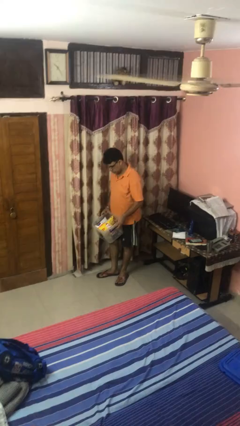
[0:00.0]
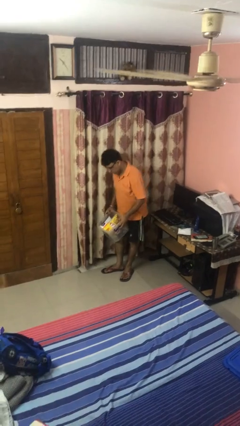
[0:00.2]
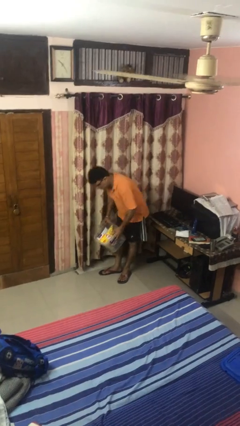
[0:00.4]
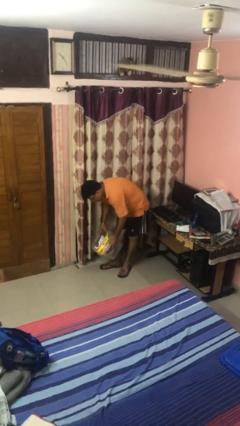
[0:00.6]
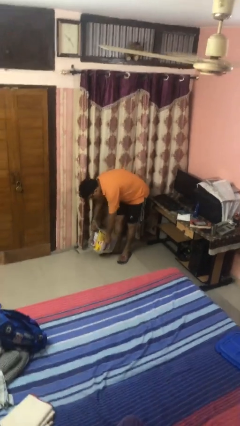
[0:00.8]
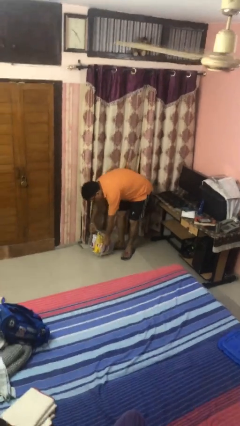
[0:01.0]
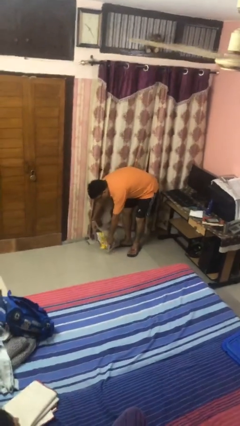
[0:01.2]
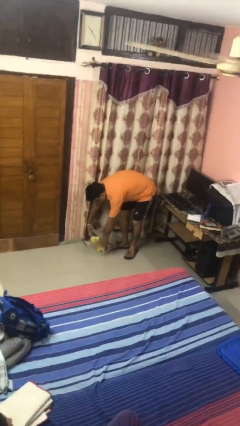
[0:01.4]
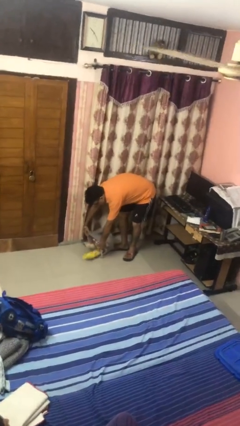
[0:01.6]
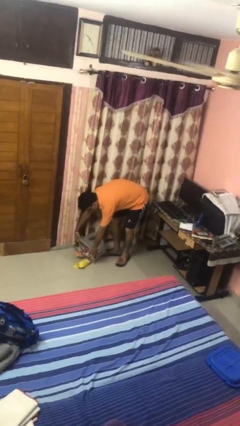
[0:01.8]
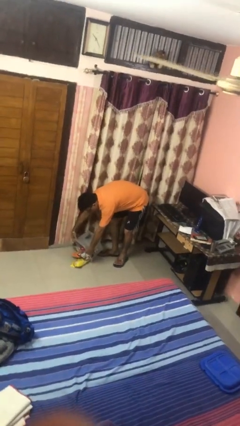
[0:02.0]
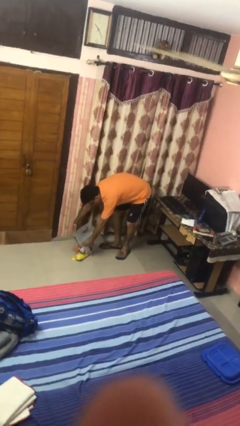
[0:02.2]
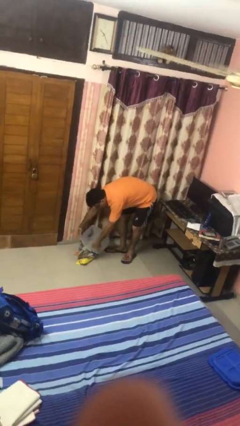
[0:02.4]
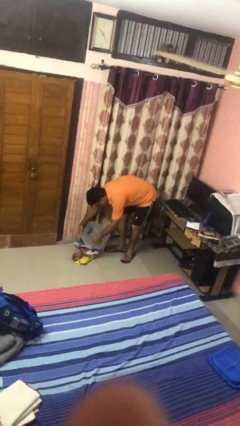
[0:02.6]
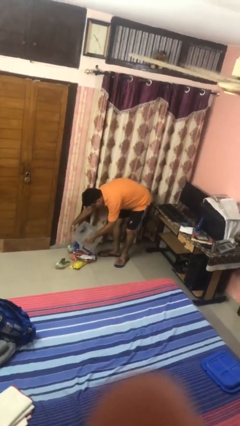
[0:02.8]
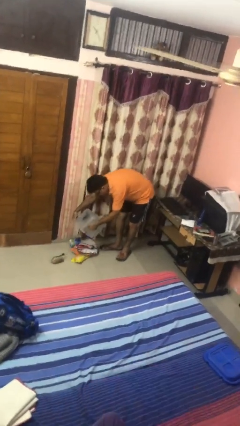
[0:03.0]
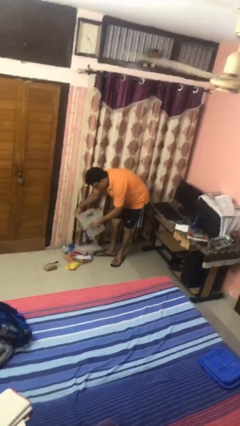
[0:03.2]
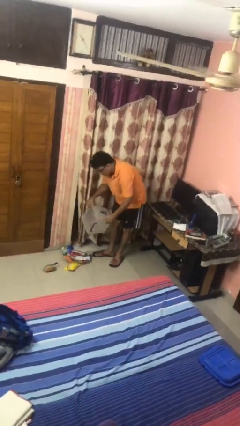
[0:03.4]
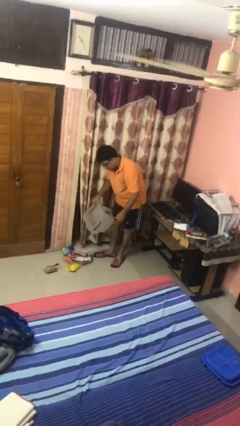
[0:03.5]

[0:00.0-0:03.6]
person unloads box onto floor

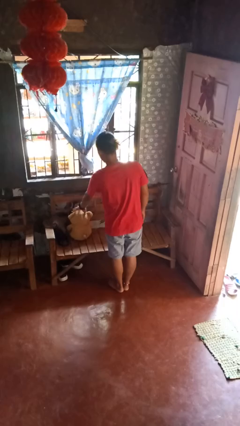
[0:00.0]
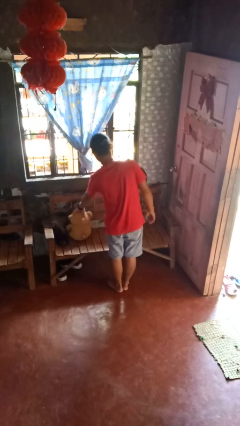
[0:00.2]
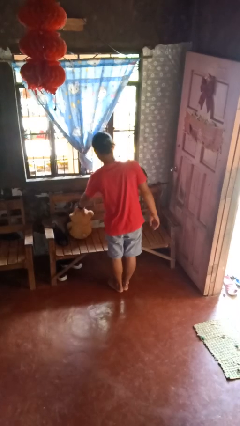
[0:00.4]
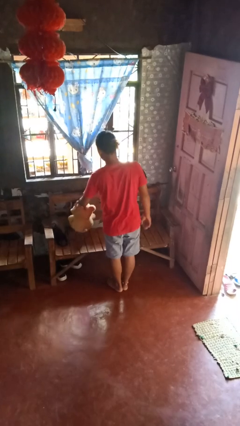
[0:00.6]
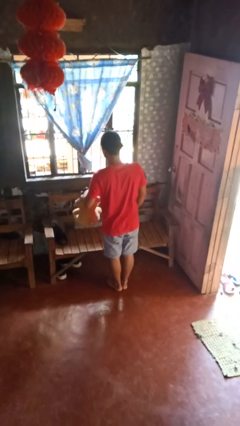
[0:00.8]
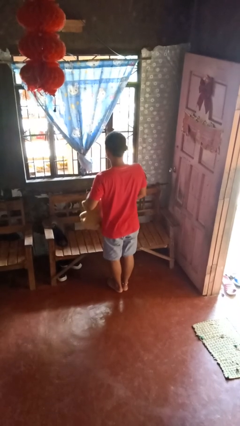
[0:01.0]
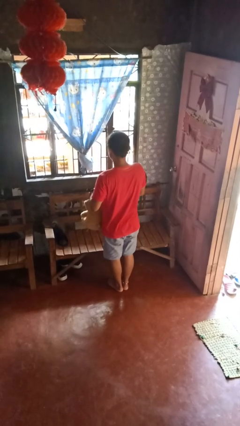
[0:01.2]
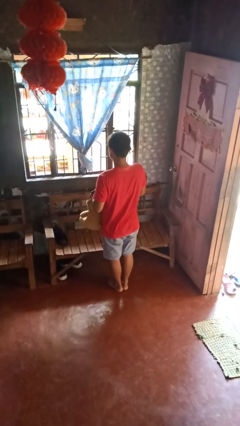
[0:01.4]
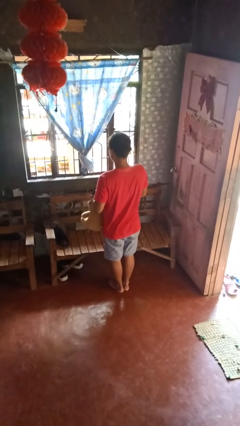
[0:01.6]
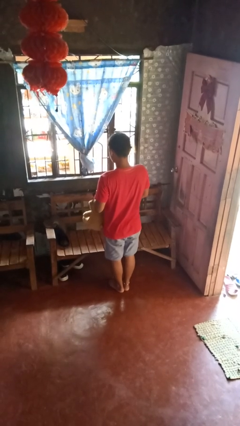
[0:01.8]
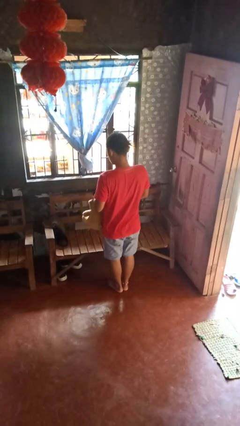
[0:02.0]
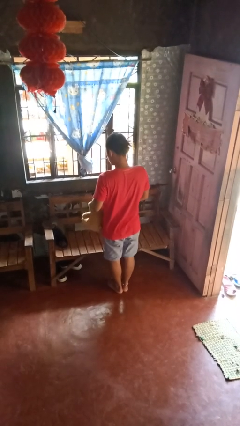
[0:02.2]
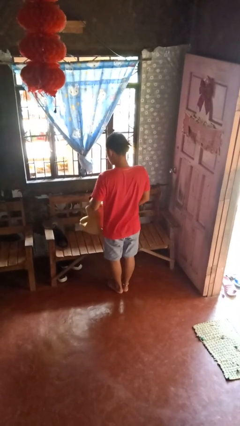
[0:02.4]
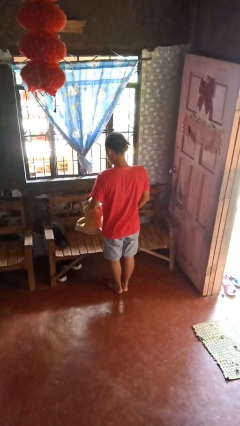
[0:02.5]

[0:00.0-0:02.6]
person picks up object from couch

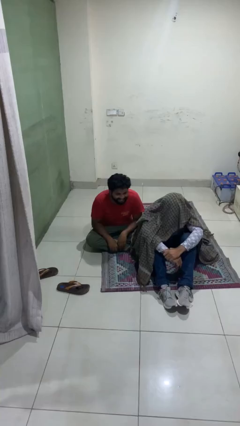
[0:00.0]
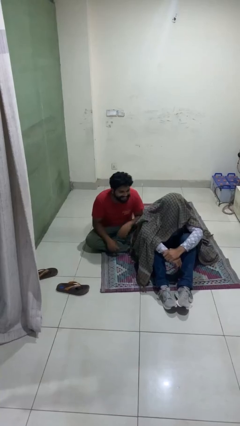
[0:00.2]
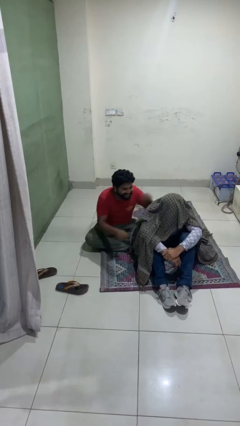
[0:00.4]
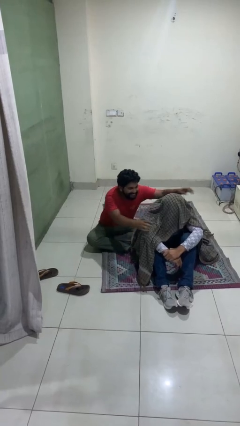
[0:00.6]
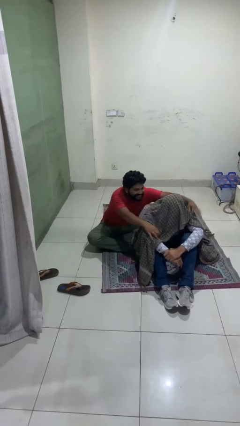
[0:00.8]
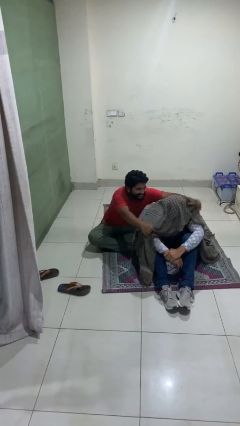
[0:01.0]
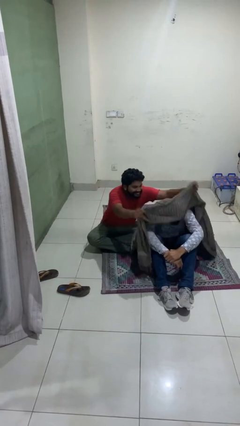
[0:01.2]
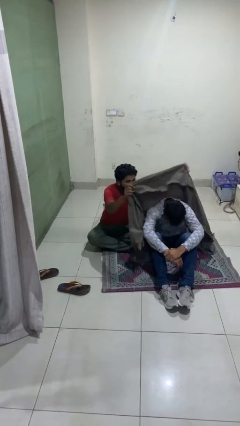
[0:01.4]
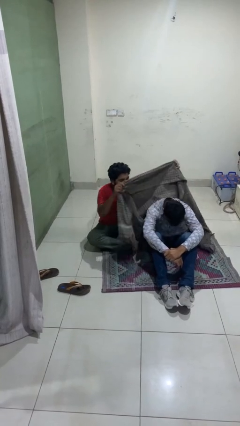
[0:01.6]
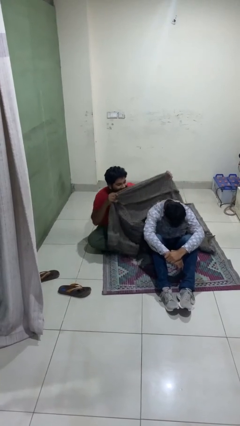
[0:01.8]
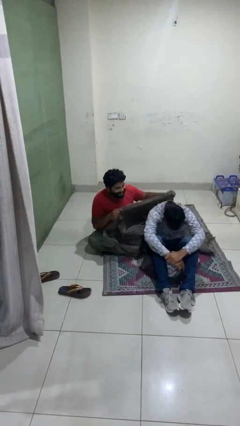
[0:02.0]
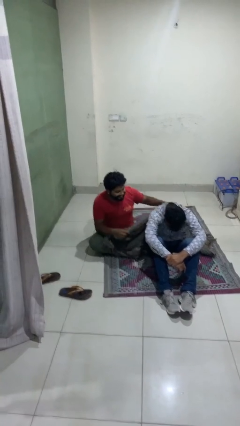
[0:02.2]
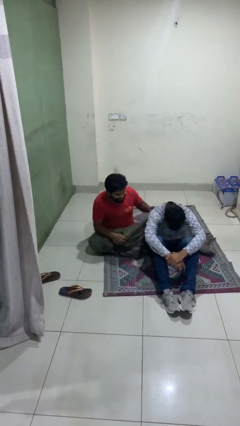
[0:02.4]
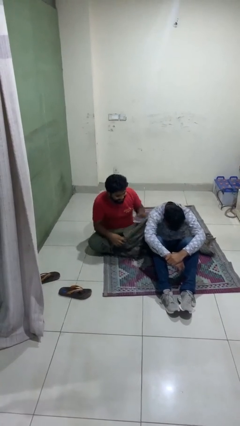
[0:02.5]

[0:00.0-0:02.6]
person uncovers friend with blanket

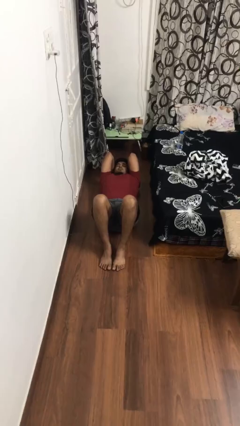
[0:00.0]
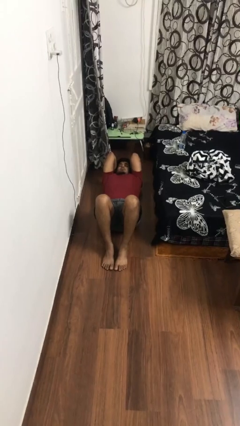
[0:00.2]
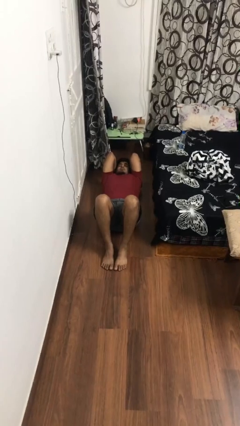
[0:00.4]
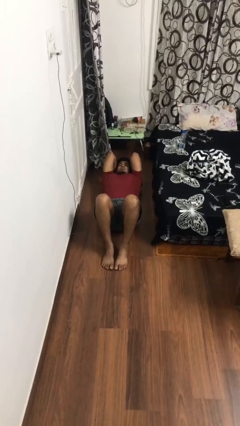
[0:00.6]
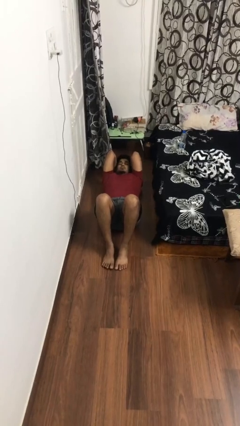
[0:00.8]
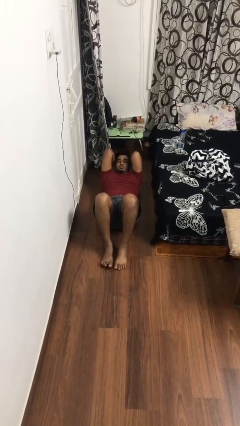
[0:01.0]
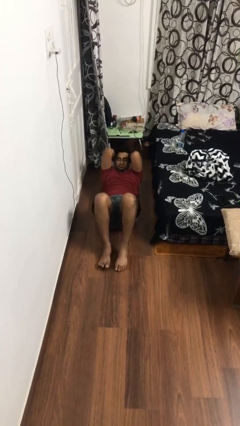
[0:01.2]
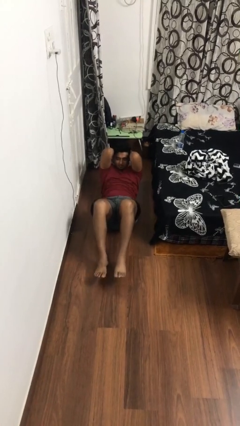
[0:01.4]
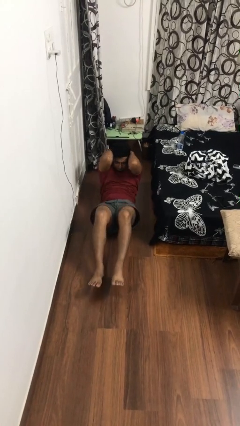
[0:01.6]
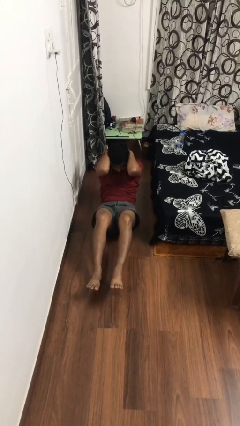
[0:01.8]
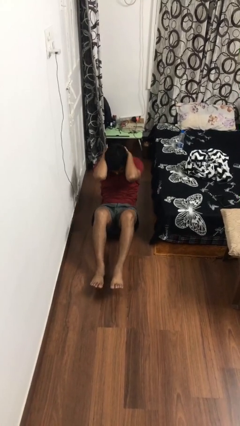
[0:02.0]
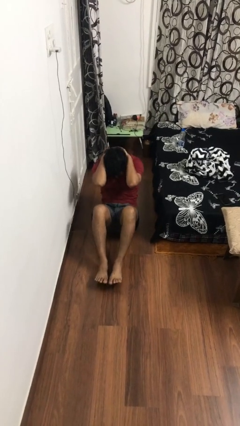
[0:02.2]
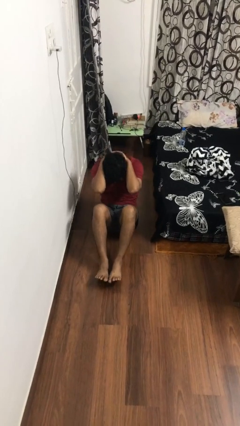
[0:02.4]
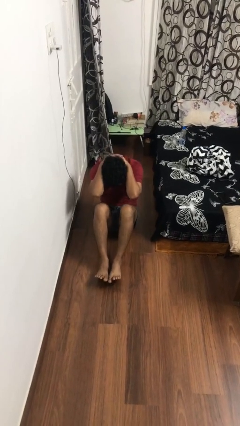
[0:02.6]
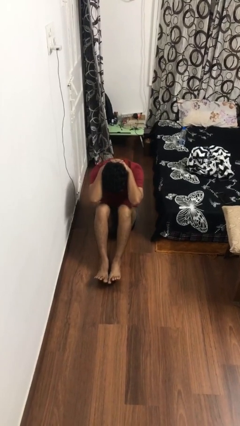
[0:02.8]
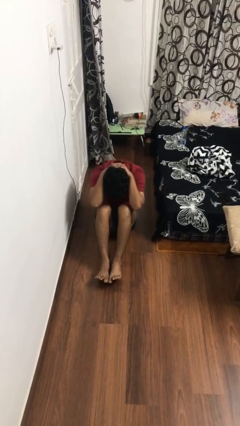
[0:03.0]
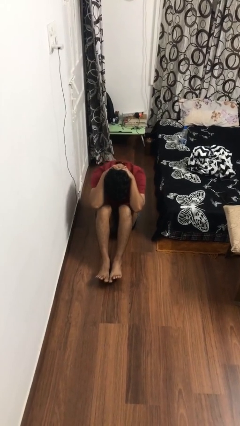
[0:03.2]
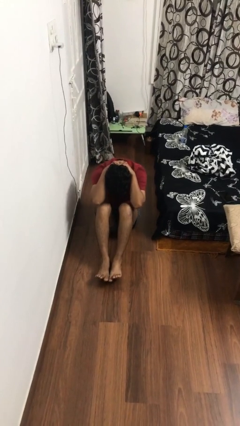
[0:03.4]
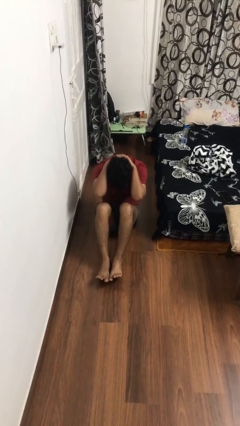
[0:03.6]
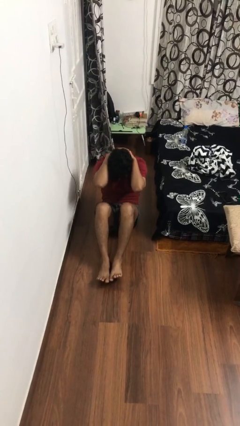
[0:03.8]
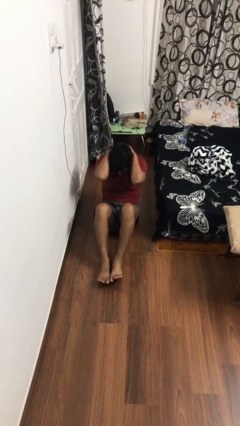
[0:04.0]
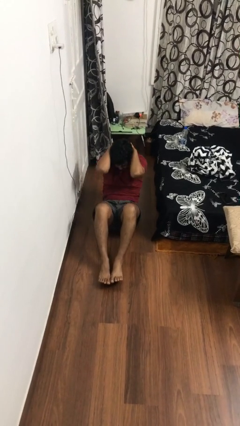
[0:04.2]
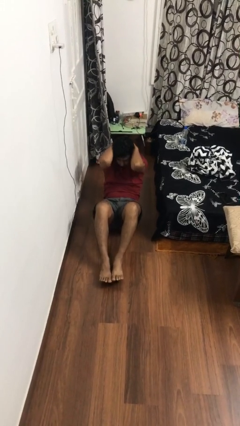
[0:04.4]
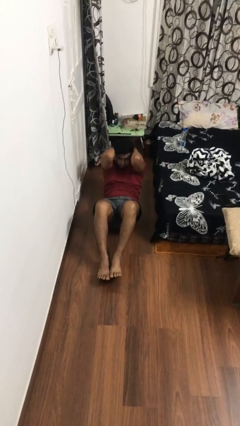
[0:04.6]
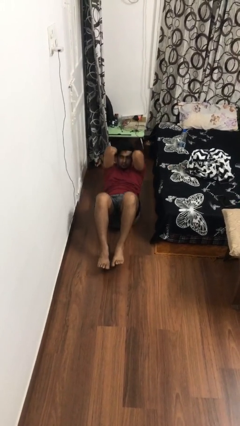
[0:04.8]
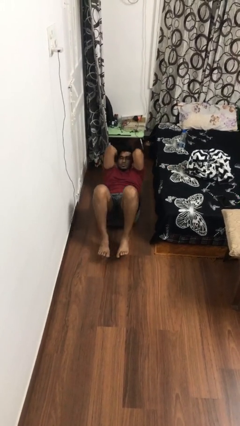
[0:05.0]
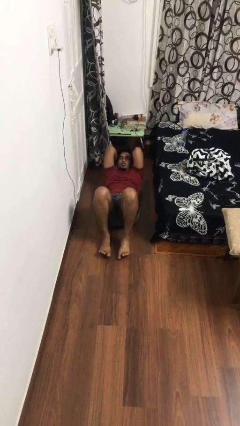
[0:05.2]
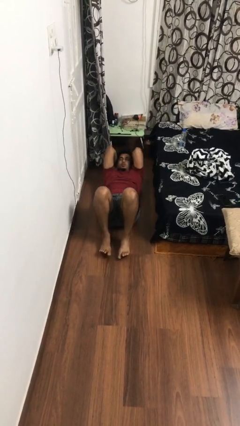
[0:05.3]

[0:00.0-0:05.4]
person exercises with situp

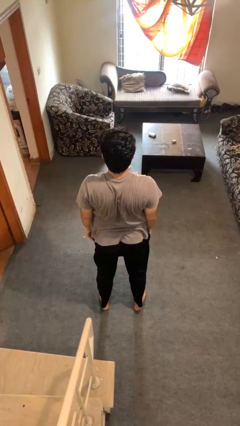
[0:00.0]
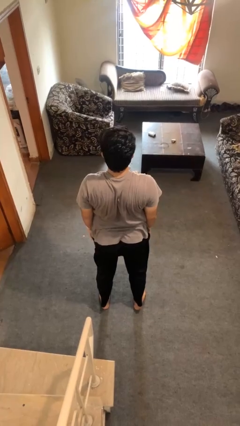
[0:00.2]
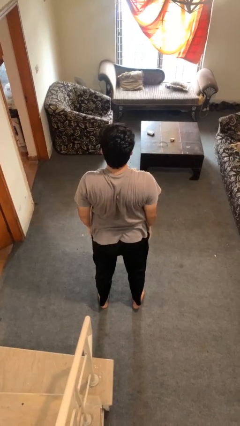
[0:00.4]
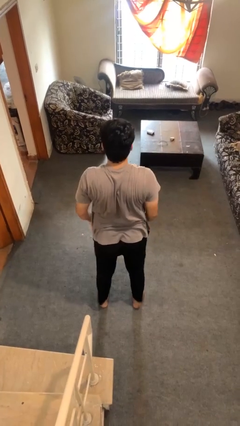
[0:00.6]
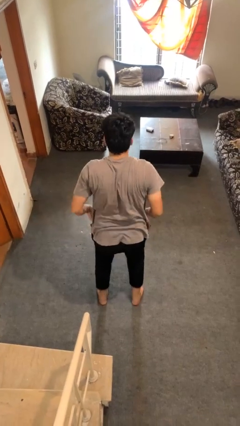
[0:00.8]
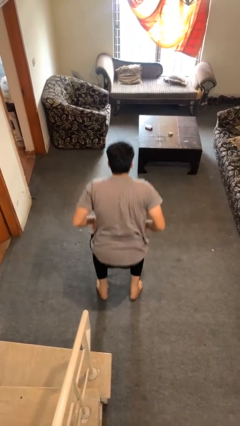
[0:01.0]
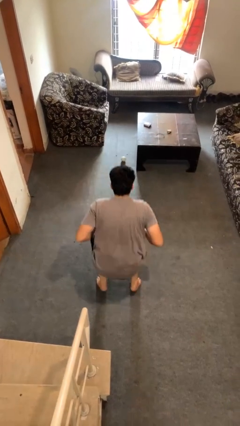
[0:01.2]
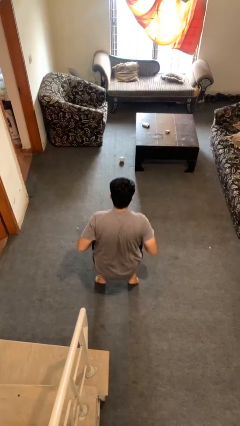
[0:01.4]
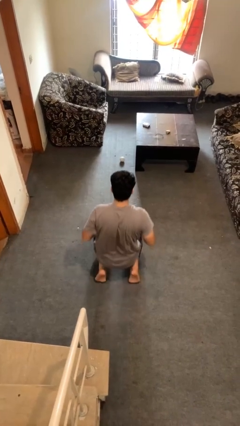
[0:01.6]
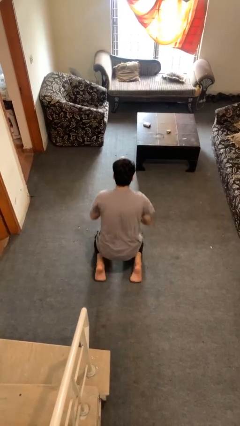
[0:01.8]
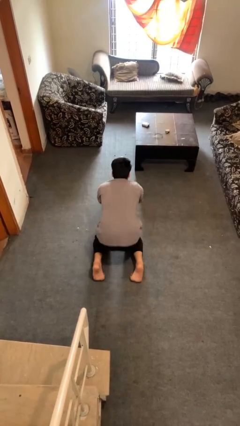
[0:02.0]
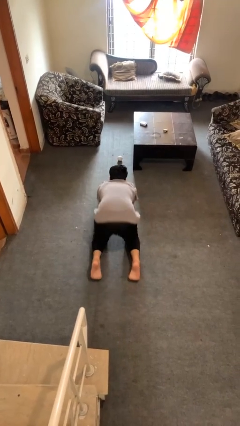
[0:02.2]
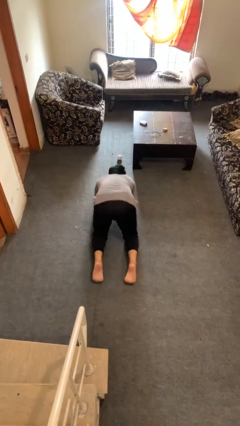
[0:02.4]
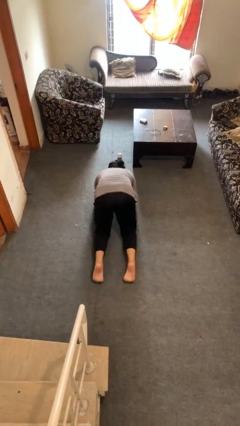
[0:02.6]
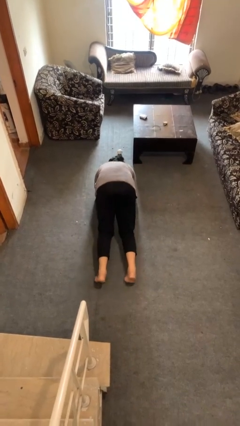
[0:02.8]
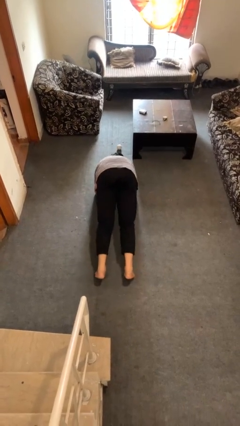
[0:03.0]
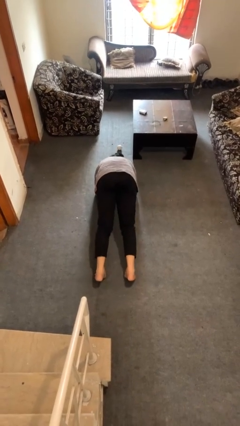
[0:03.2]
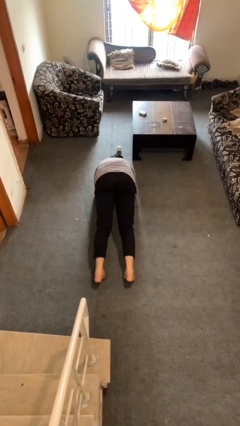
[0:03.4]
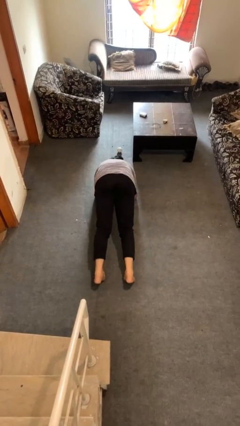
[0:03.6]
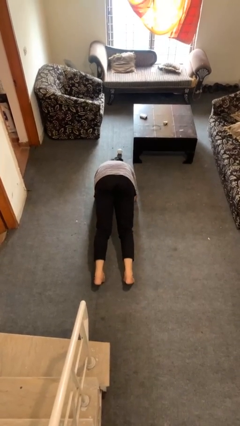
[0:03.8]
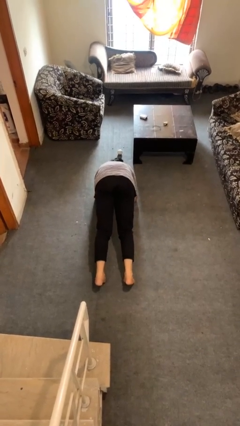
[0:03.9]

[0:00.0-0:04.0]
person exercises with plank
